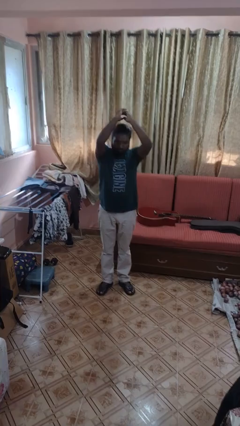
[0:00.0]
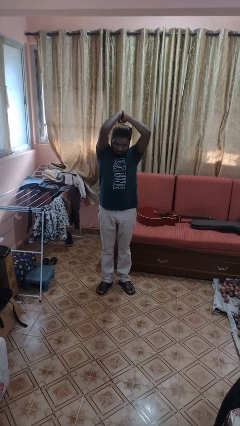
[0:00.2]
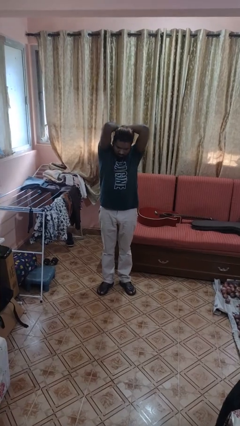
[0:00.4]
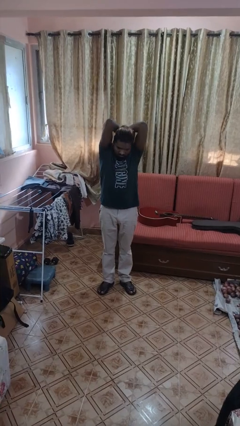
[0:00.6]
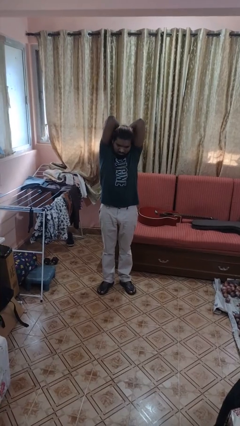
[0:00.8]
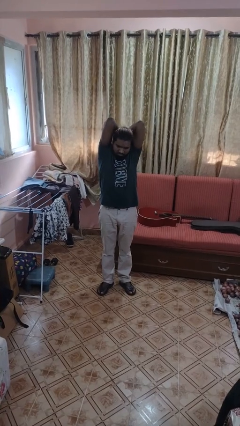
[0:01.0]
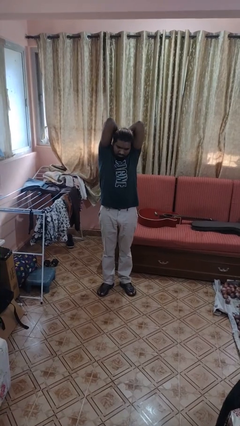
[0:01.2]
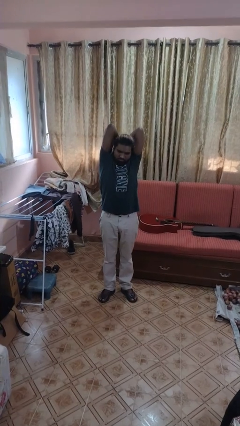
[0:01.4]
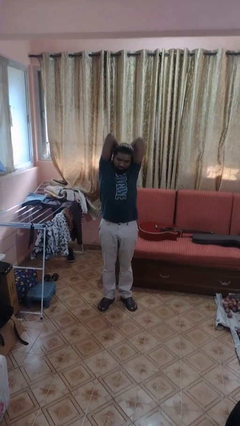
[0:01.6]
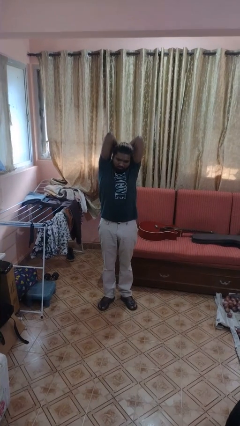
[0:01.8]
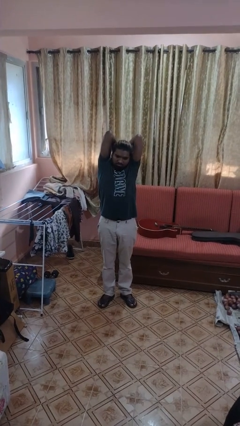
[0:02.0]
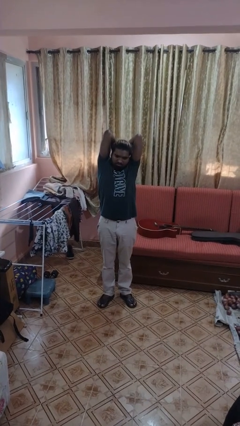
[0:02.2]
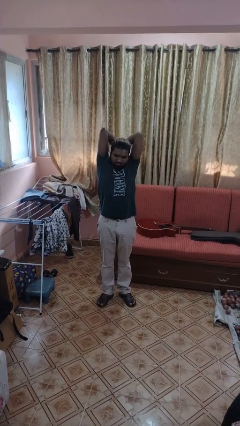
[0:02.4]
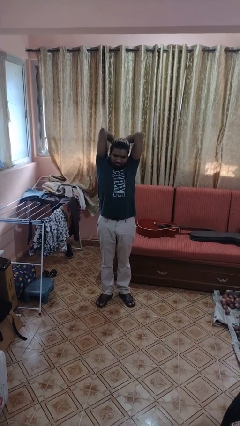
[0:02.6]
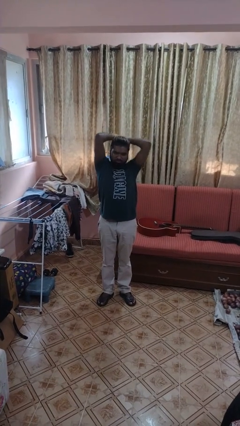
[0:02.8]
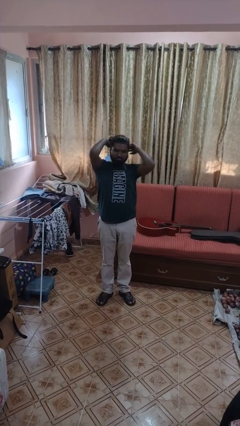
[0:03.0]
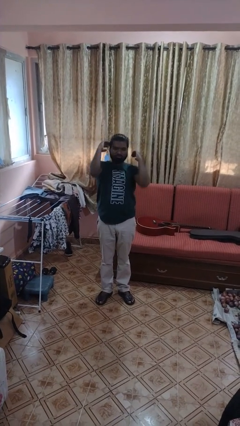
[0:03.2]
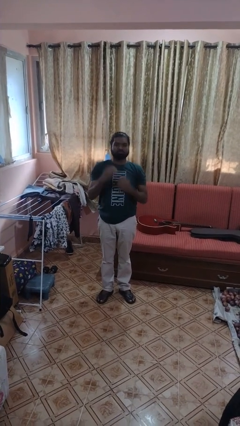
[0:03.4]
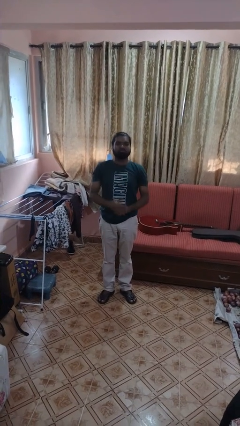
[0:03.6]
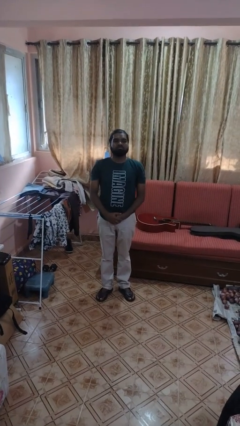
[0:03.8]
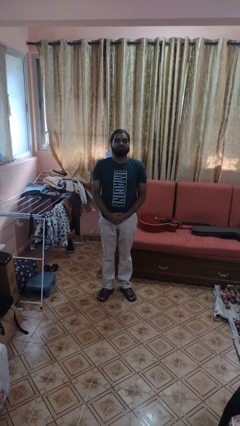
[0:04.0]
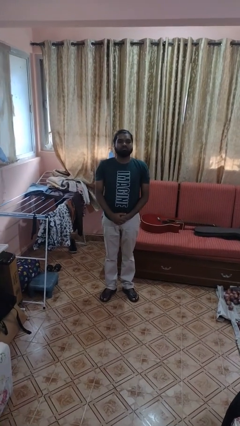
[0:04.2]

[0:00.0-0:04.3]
person stretches arms over head

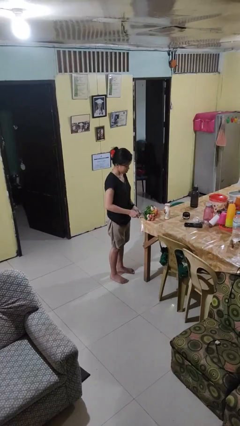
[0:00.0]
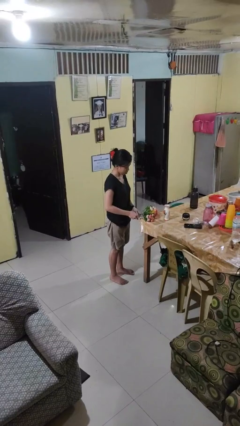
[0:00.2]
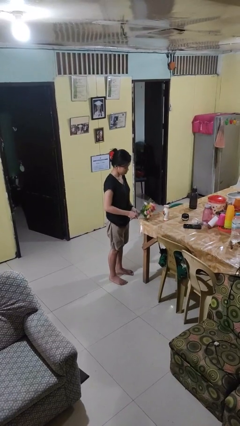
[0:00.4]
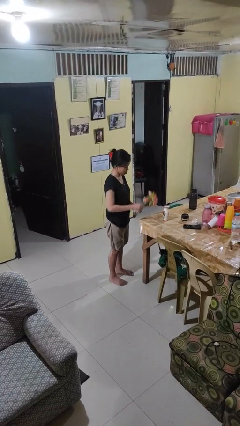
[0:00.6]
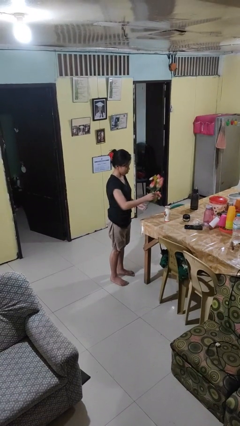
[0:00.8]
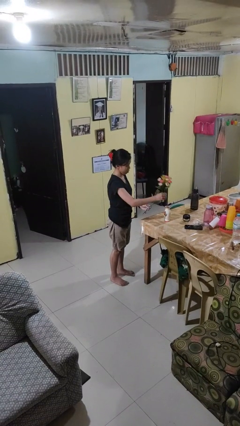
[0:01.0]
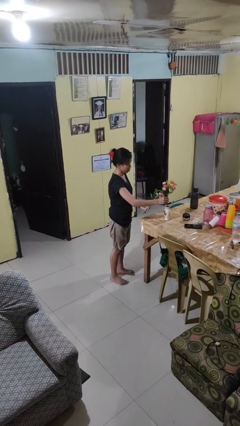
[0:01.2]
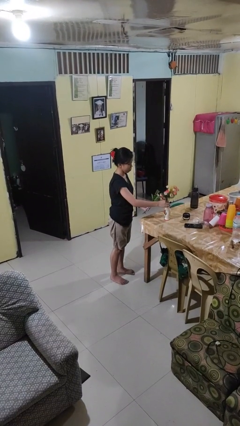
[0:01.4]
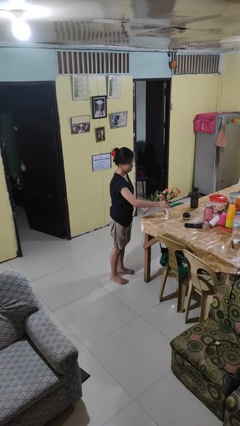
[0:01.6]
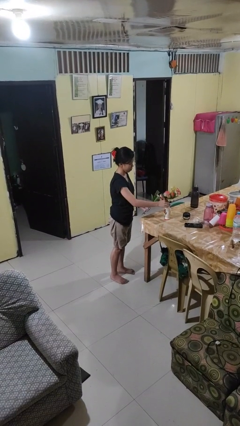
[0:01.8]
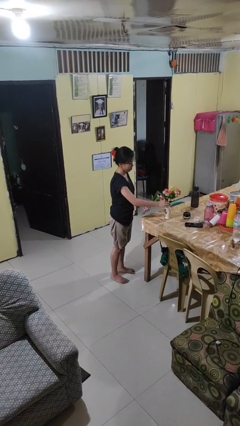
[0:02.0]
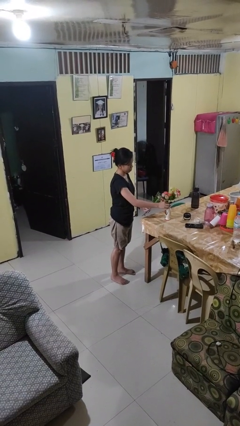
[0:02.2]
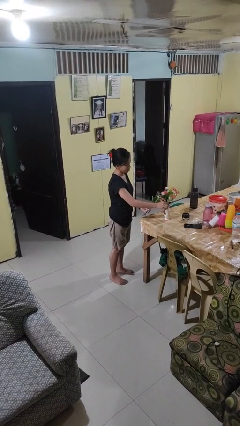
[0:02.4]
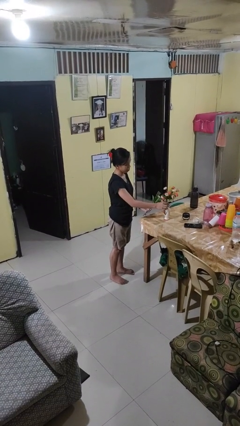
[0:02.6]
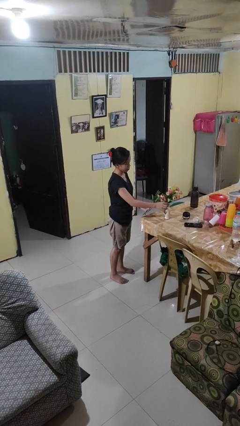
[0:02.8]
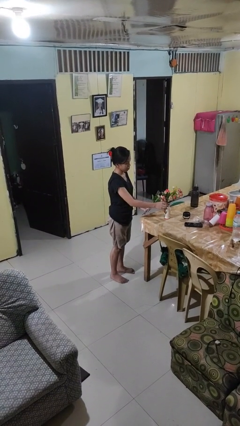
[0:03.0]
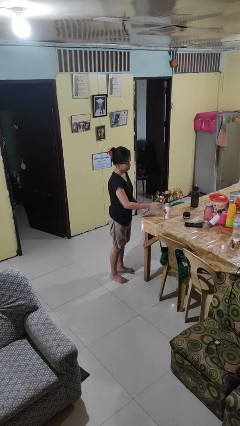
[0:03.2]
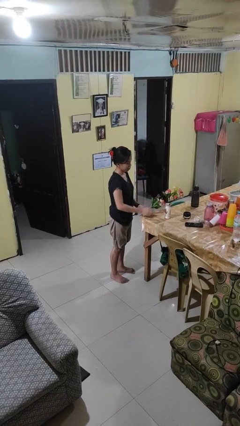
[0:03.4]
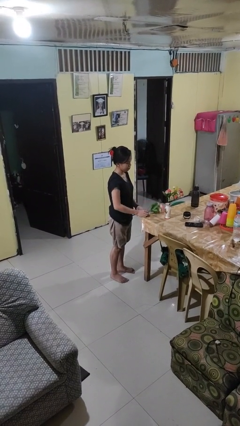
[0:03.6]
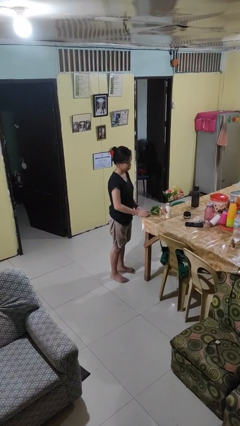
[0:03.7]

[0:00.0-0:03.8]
person arranges flowers in vase

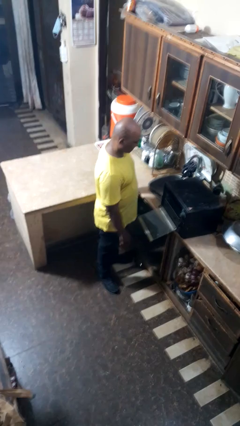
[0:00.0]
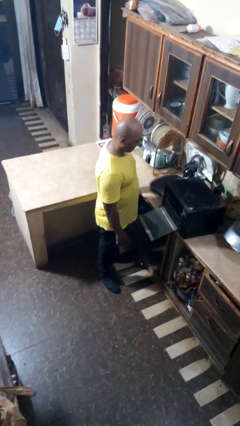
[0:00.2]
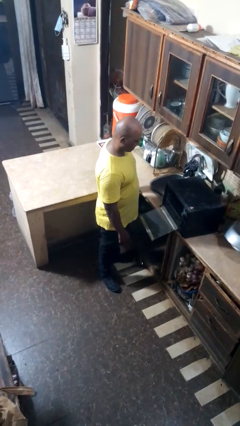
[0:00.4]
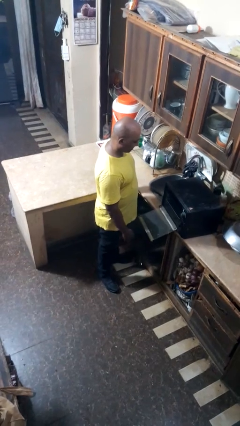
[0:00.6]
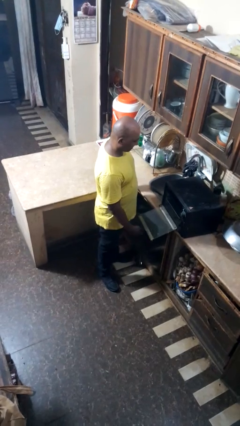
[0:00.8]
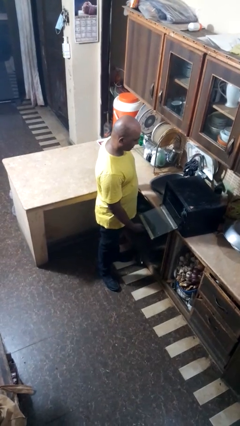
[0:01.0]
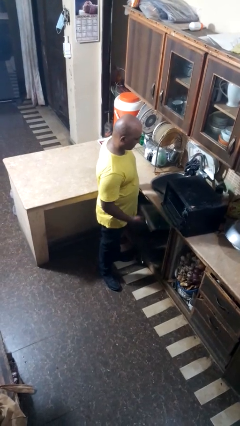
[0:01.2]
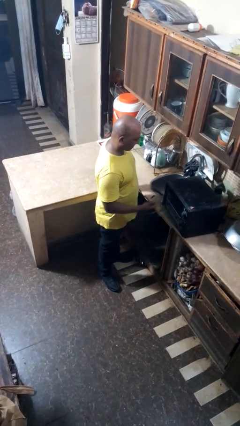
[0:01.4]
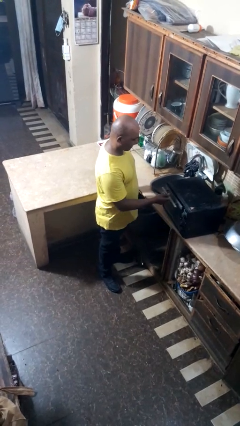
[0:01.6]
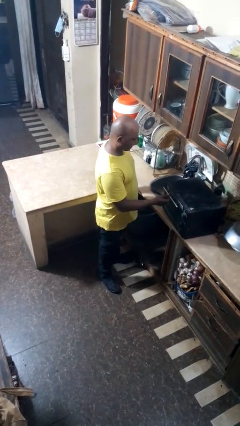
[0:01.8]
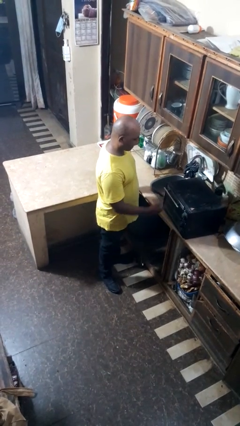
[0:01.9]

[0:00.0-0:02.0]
person closes oven door

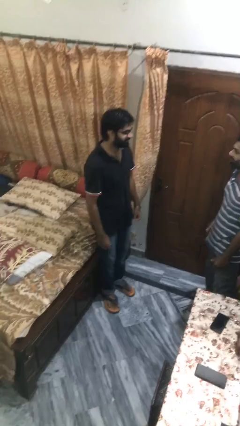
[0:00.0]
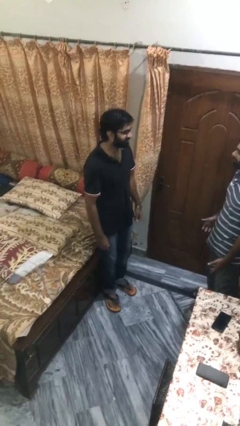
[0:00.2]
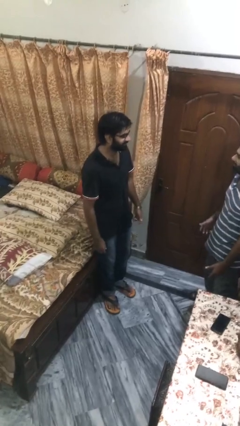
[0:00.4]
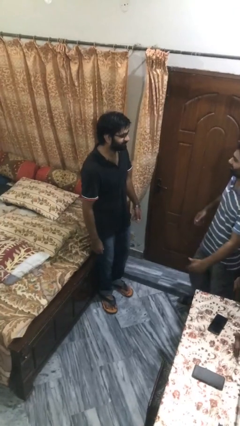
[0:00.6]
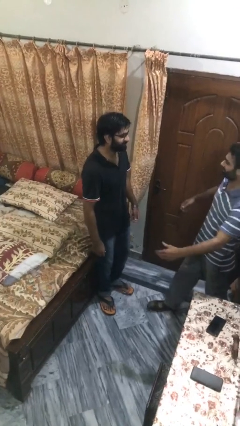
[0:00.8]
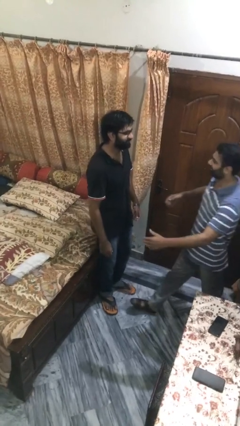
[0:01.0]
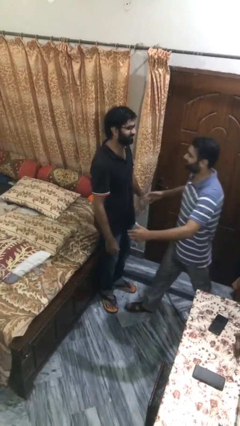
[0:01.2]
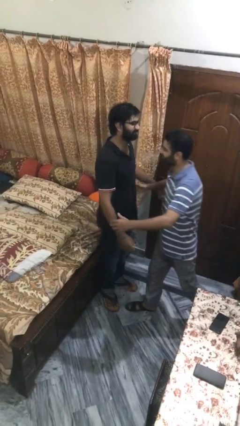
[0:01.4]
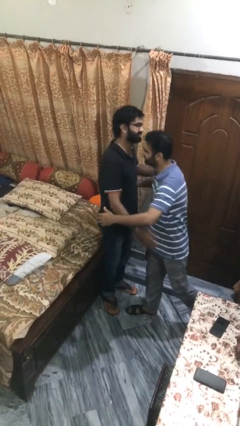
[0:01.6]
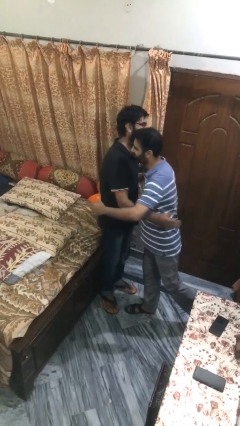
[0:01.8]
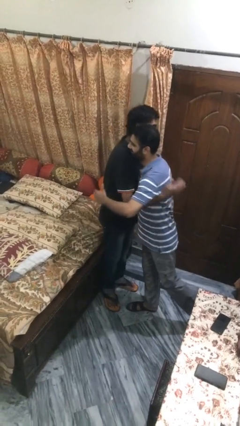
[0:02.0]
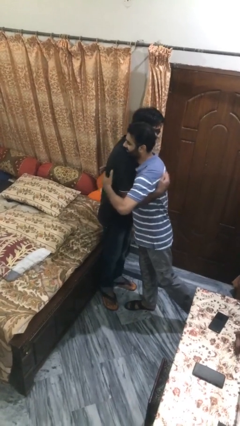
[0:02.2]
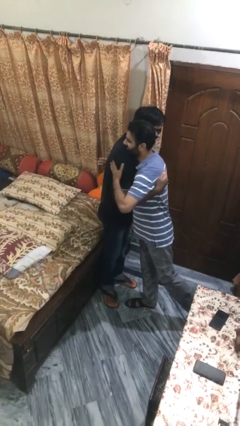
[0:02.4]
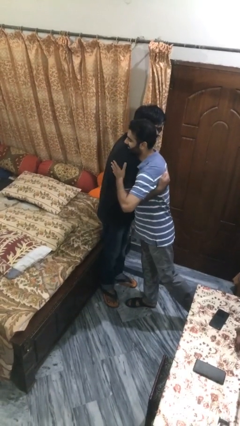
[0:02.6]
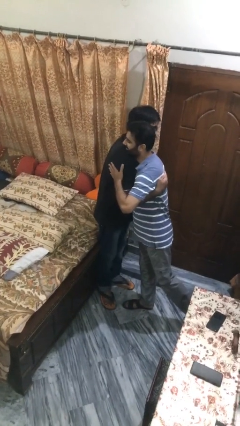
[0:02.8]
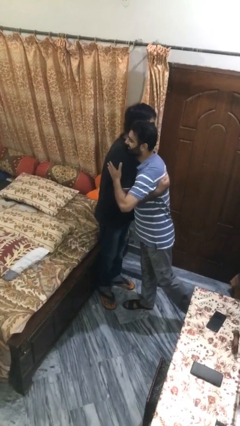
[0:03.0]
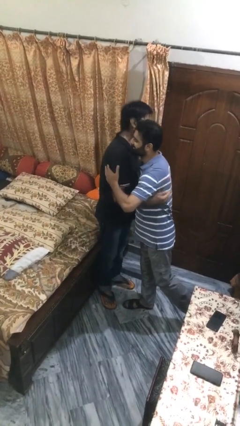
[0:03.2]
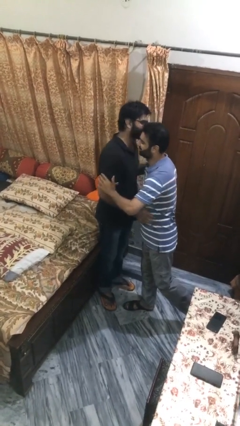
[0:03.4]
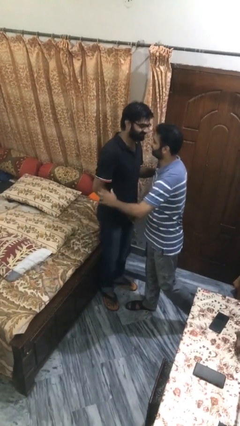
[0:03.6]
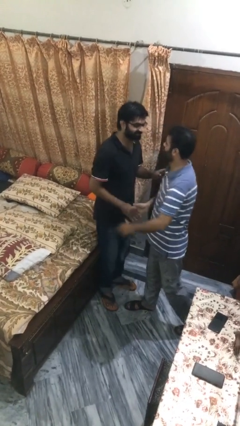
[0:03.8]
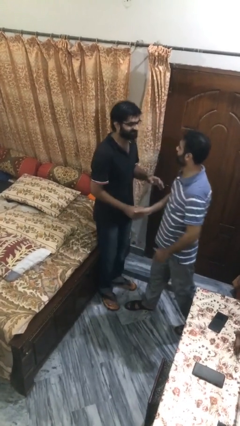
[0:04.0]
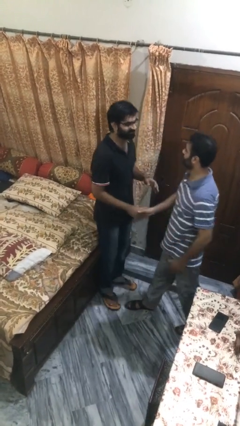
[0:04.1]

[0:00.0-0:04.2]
person embraces person

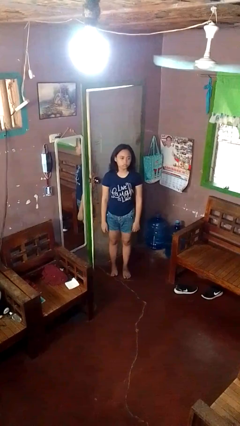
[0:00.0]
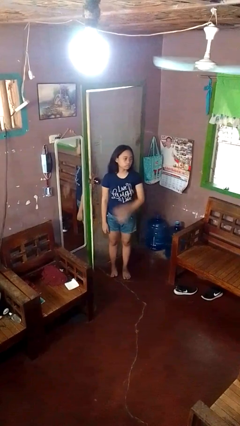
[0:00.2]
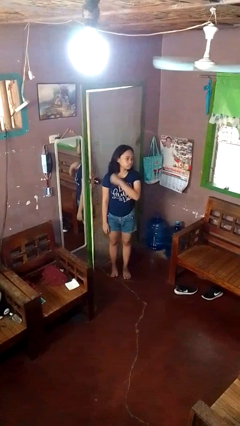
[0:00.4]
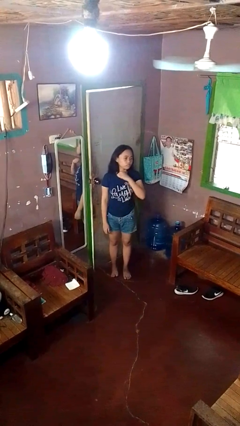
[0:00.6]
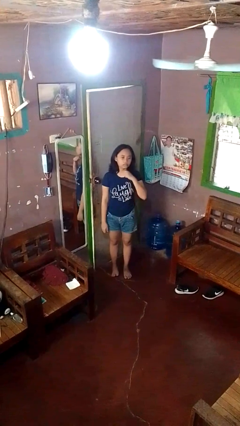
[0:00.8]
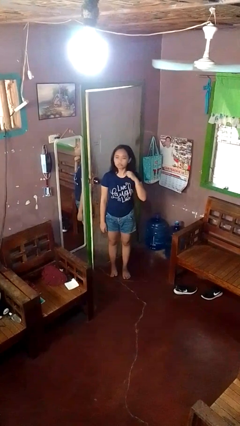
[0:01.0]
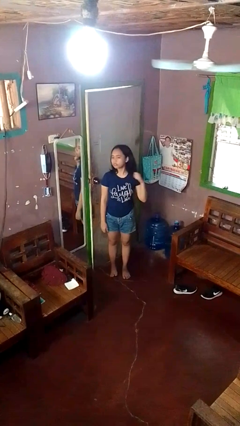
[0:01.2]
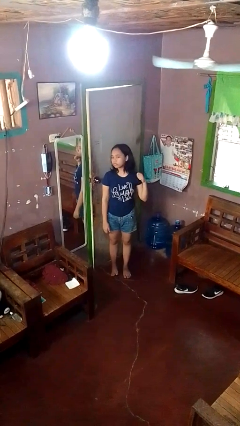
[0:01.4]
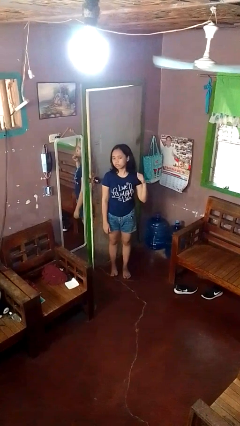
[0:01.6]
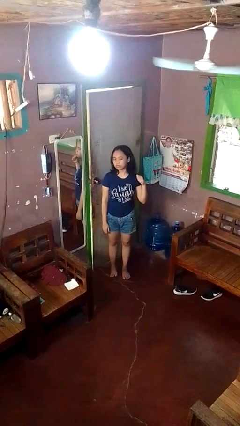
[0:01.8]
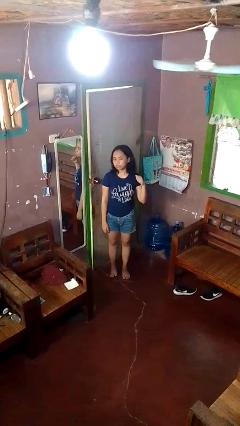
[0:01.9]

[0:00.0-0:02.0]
person gestures cut

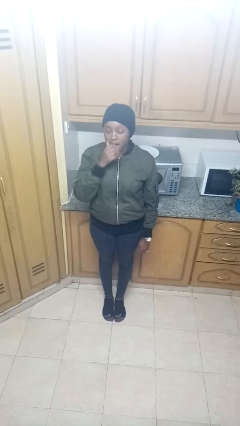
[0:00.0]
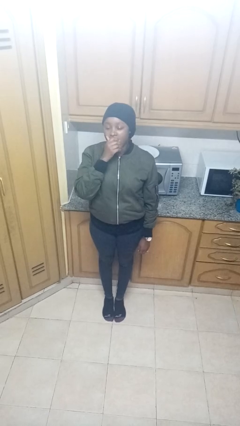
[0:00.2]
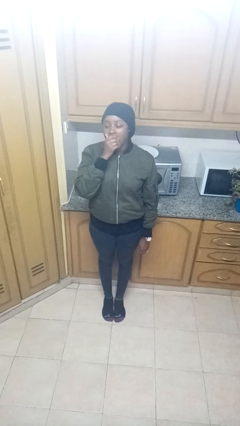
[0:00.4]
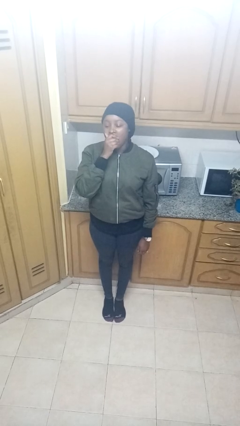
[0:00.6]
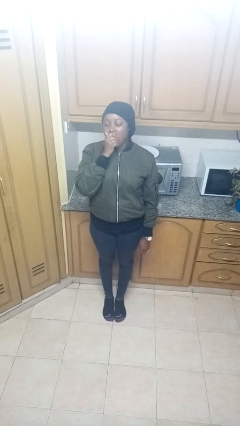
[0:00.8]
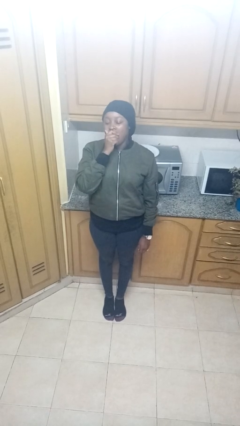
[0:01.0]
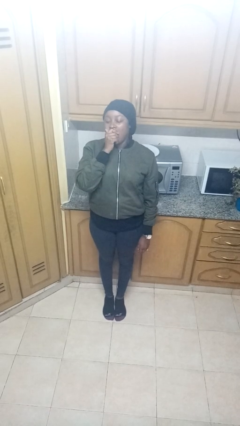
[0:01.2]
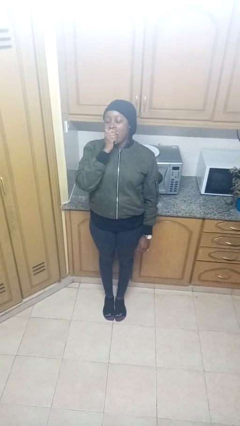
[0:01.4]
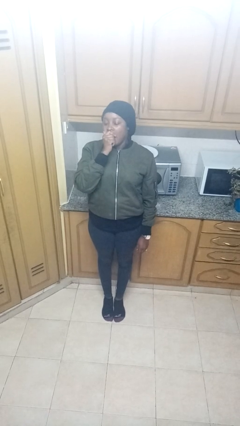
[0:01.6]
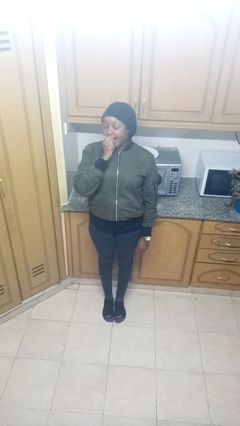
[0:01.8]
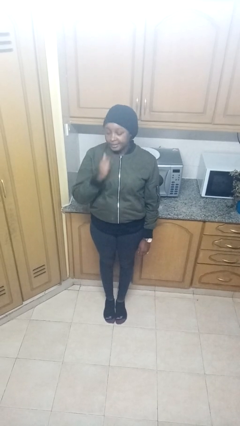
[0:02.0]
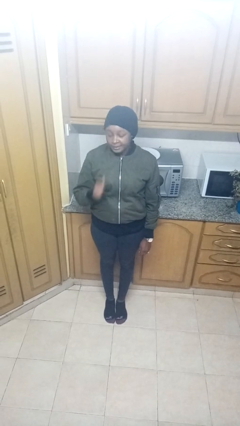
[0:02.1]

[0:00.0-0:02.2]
person yawns
